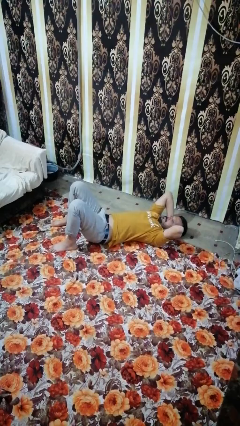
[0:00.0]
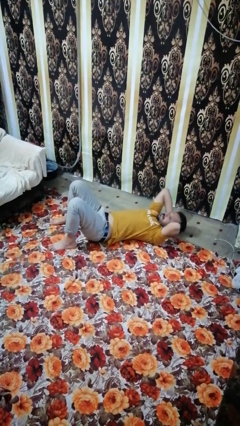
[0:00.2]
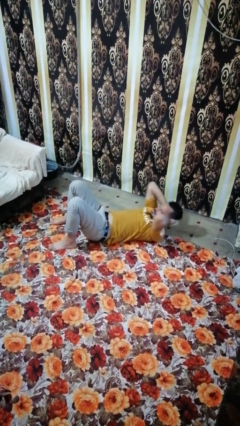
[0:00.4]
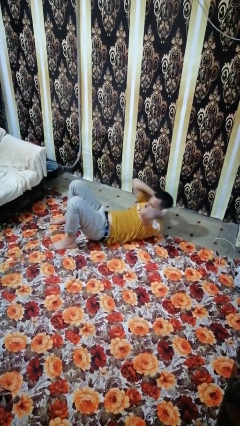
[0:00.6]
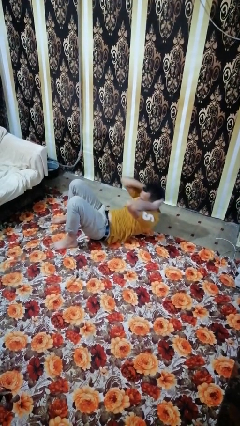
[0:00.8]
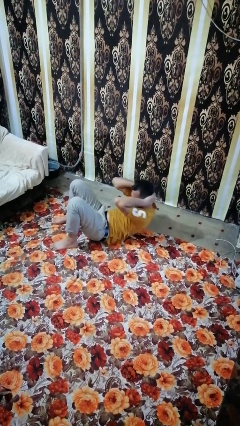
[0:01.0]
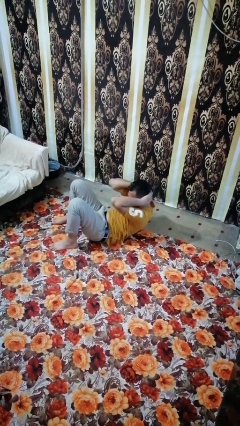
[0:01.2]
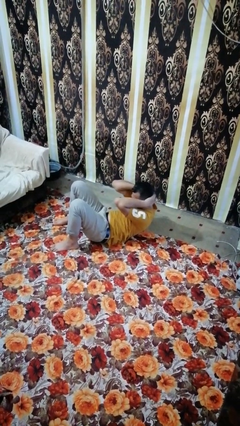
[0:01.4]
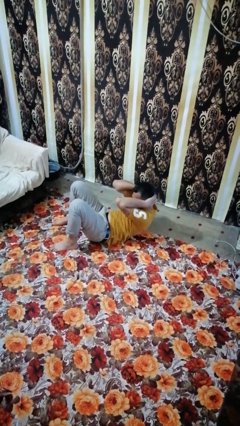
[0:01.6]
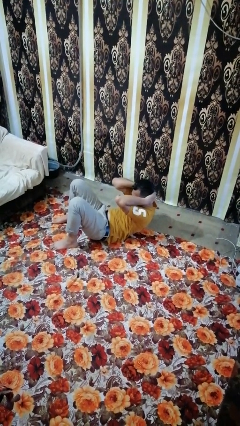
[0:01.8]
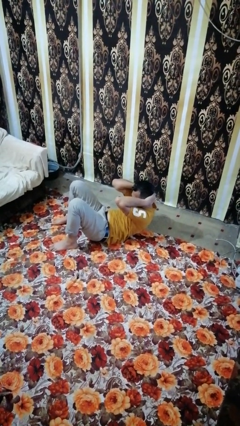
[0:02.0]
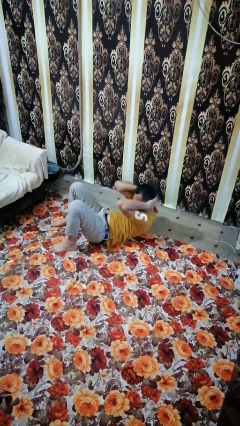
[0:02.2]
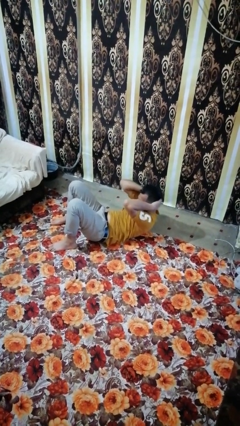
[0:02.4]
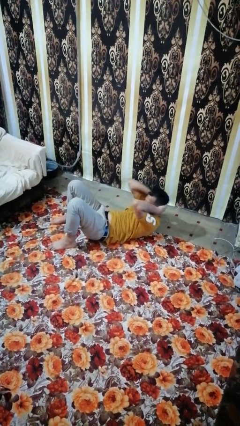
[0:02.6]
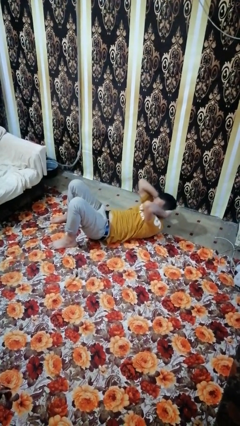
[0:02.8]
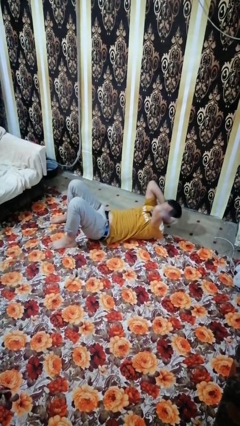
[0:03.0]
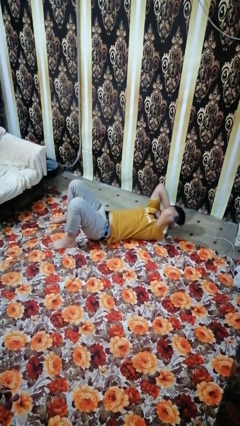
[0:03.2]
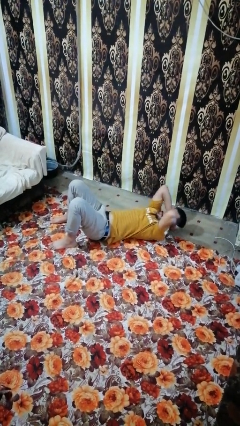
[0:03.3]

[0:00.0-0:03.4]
person exercises with situp

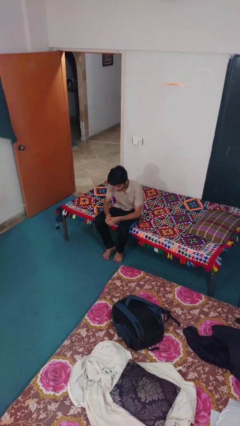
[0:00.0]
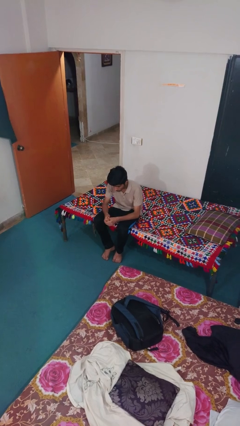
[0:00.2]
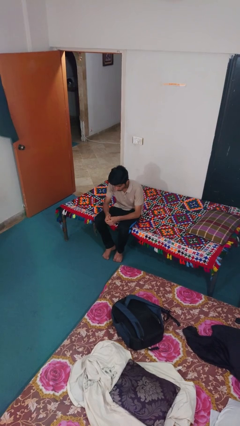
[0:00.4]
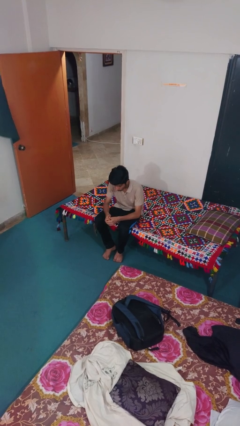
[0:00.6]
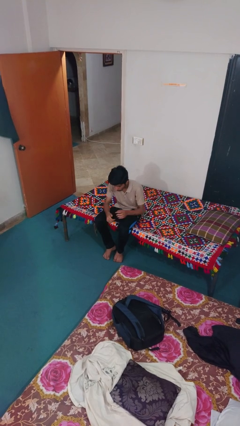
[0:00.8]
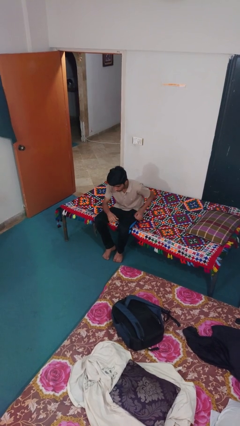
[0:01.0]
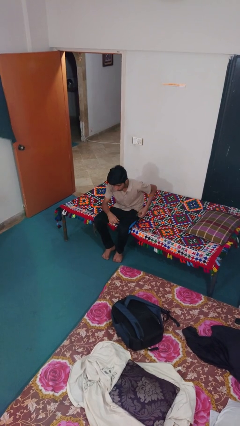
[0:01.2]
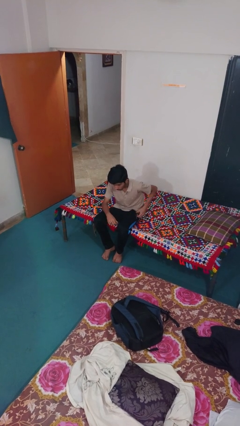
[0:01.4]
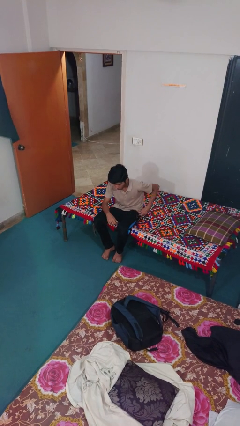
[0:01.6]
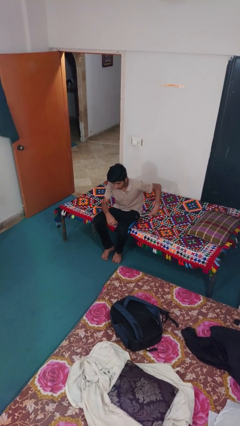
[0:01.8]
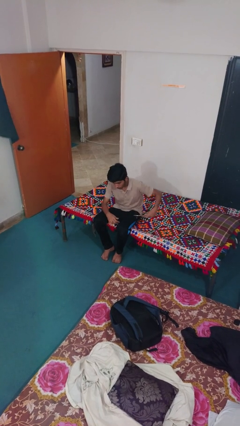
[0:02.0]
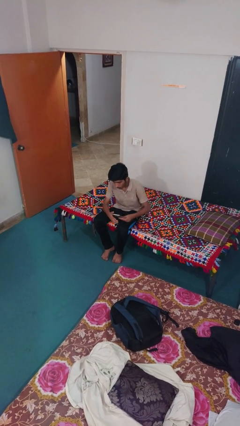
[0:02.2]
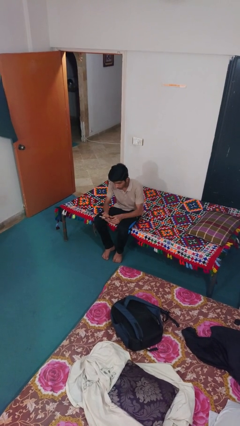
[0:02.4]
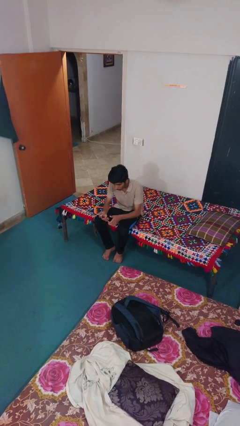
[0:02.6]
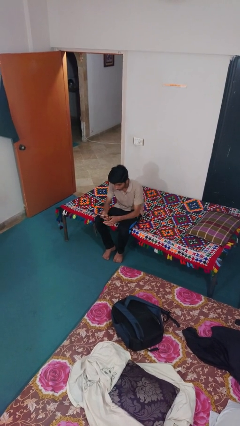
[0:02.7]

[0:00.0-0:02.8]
person takes phone from pocket

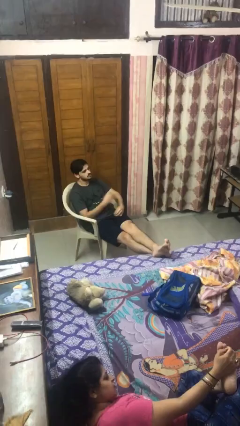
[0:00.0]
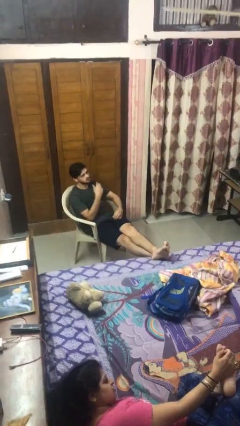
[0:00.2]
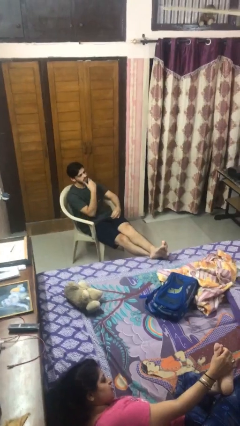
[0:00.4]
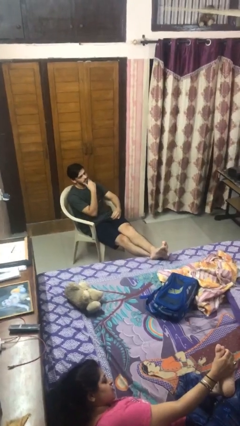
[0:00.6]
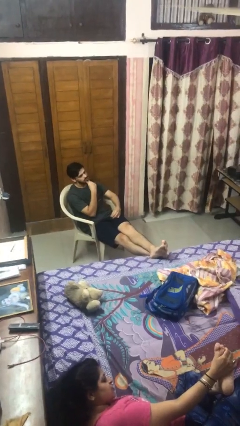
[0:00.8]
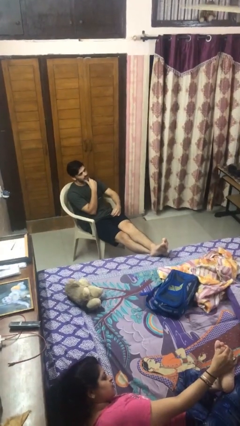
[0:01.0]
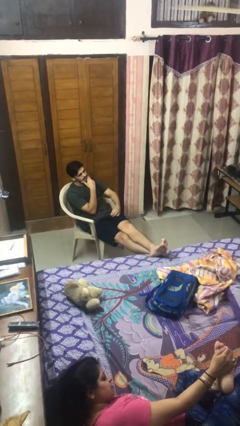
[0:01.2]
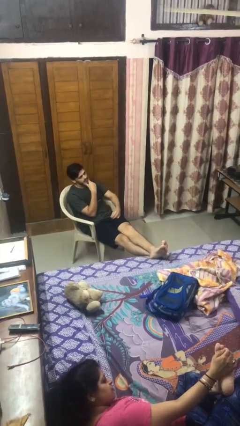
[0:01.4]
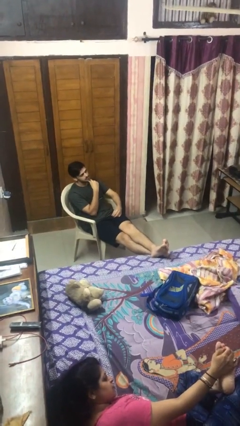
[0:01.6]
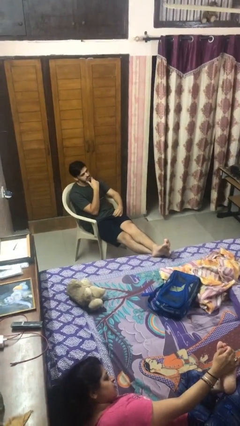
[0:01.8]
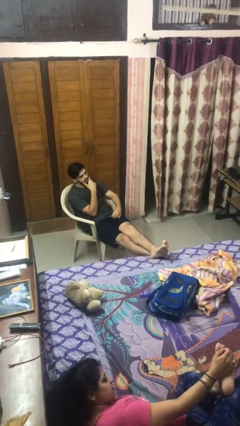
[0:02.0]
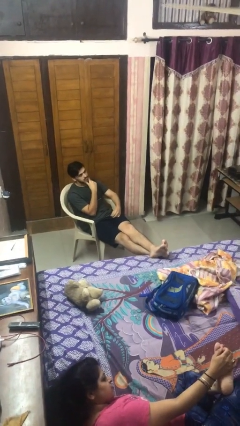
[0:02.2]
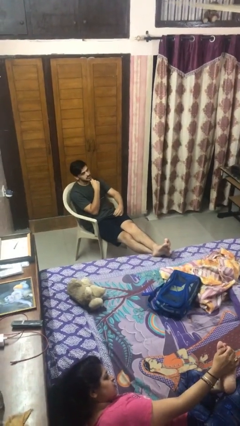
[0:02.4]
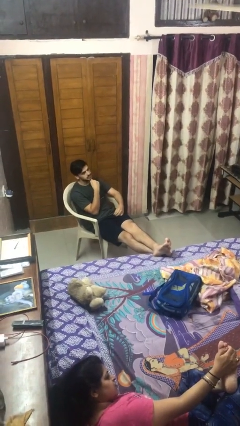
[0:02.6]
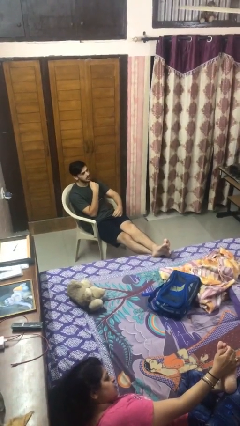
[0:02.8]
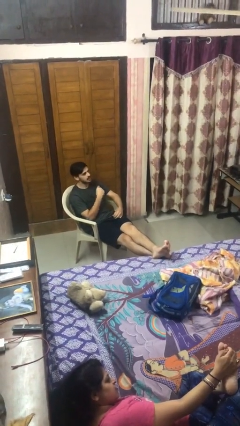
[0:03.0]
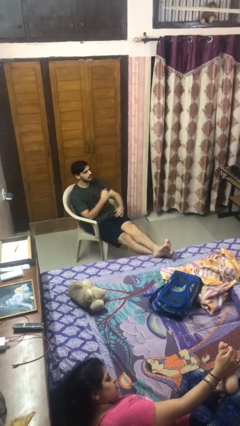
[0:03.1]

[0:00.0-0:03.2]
person strokes chin

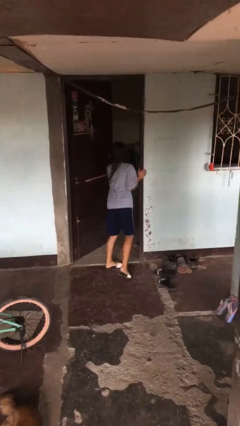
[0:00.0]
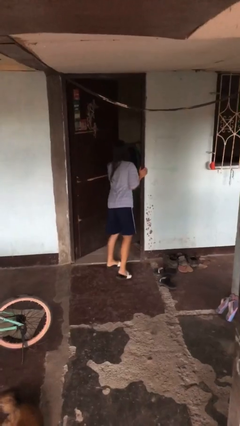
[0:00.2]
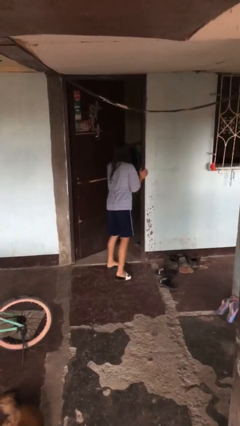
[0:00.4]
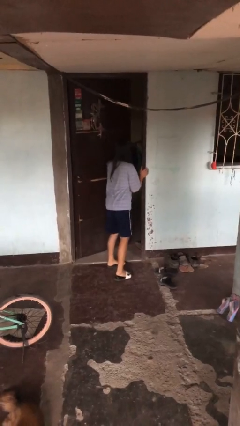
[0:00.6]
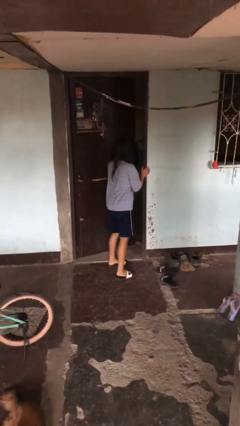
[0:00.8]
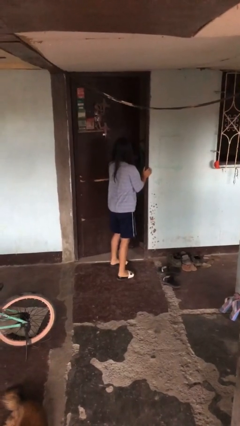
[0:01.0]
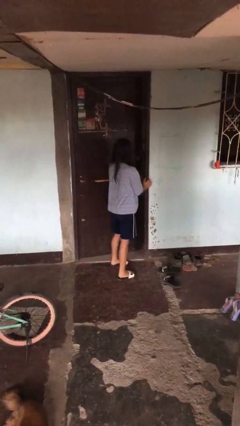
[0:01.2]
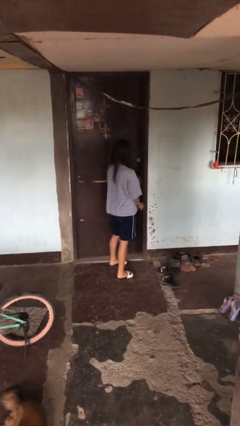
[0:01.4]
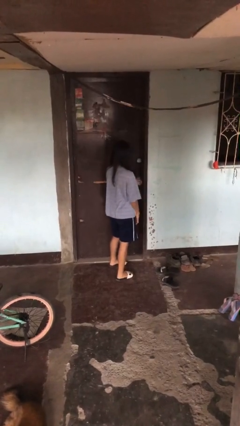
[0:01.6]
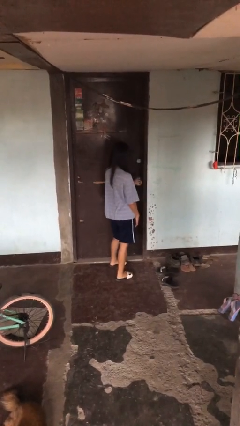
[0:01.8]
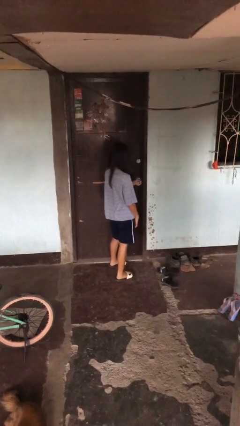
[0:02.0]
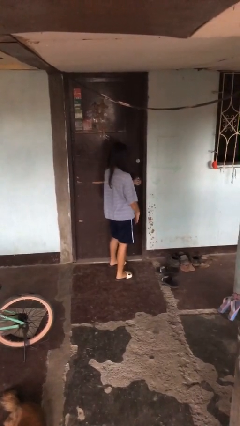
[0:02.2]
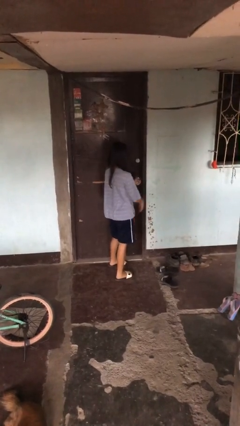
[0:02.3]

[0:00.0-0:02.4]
person closes facility door

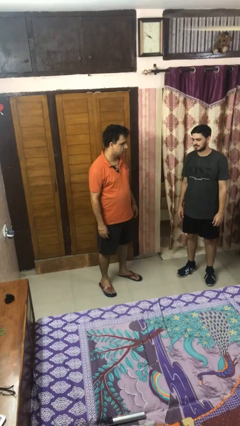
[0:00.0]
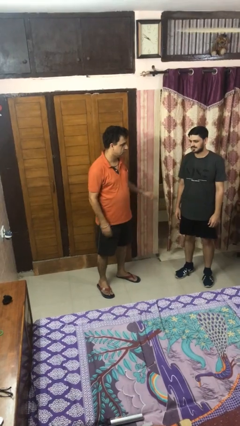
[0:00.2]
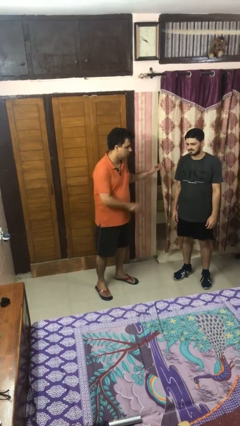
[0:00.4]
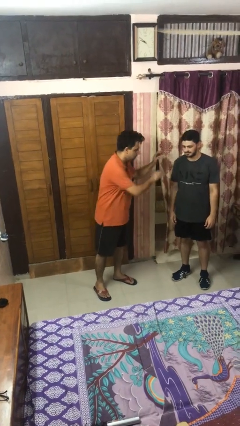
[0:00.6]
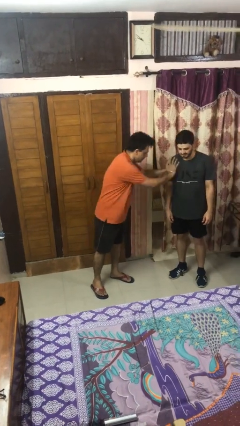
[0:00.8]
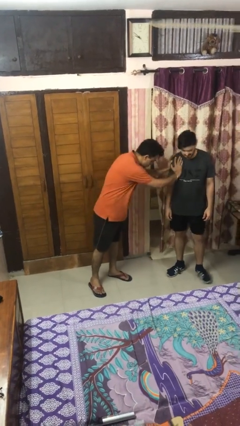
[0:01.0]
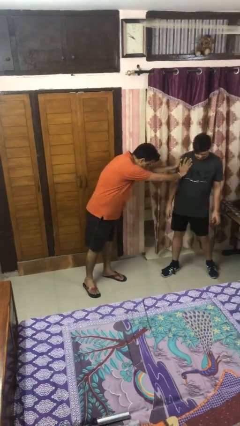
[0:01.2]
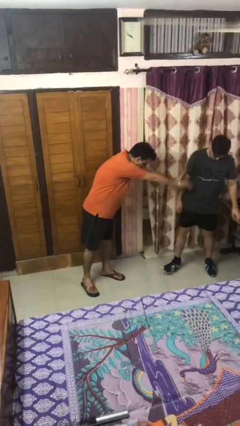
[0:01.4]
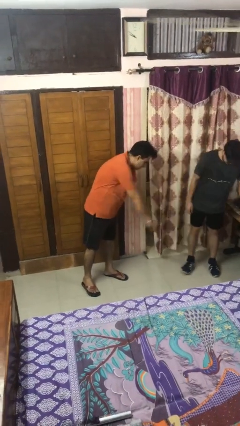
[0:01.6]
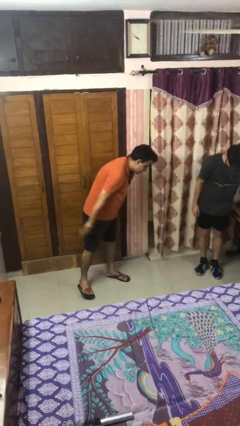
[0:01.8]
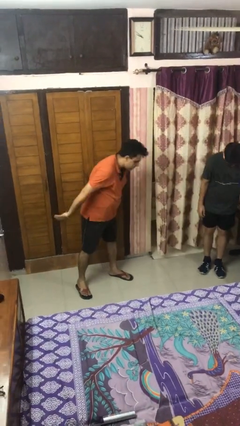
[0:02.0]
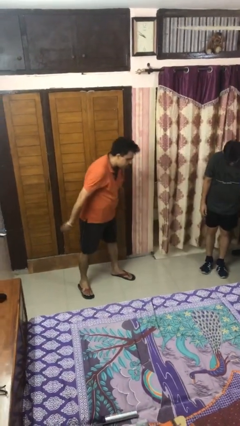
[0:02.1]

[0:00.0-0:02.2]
person shoves person

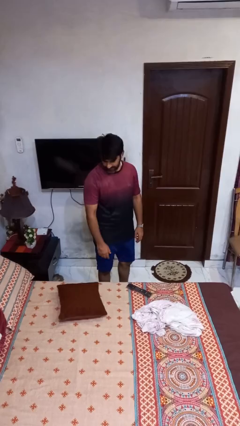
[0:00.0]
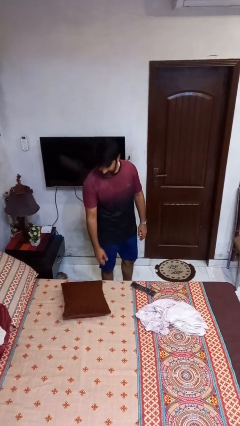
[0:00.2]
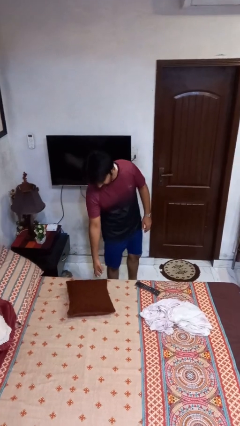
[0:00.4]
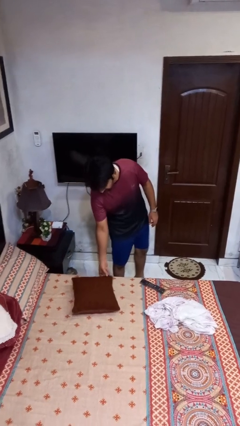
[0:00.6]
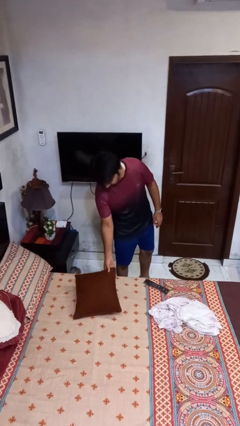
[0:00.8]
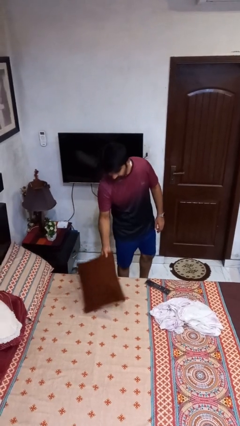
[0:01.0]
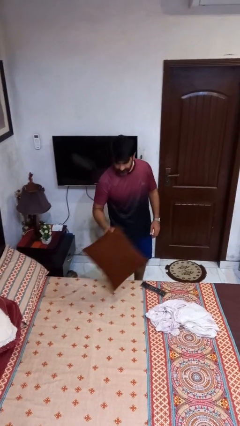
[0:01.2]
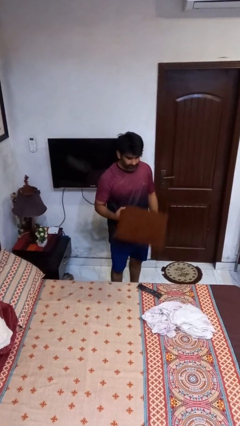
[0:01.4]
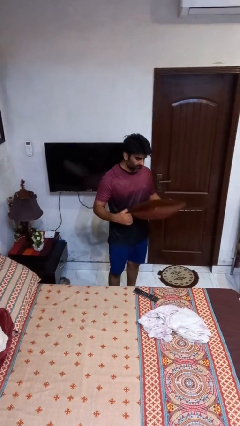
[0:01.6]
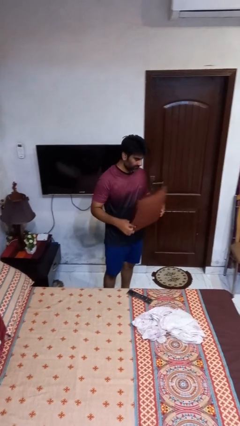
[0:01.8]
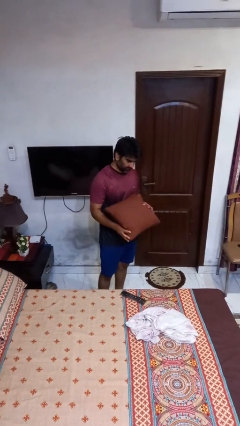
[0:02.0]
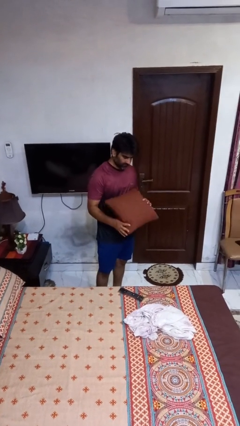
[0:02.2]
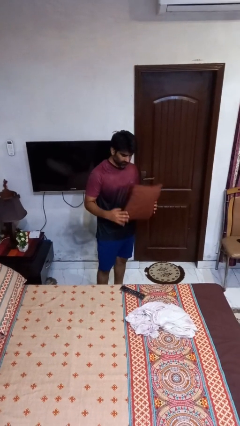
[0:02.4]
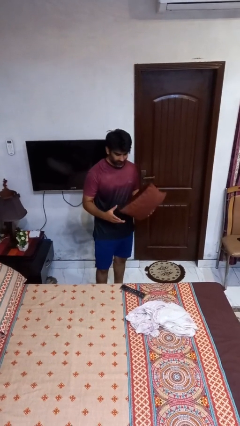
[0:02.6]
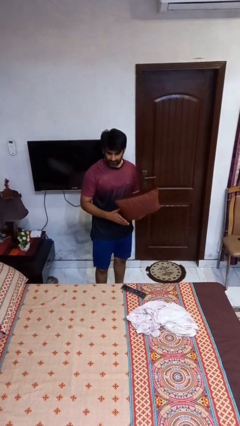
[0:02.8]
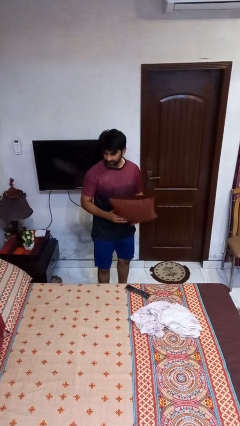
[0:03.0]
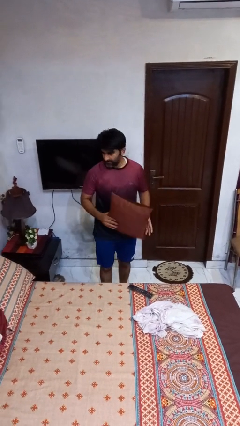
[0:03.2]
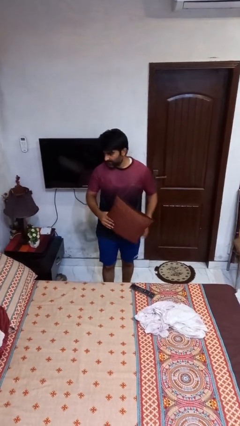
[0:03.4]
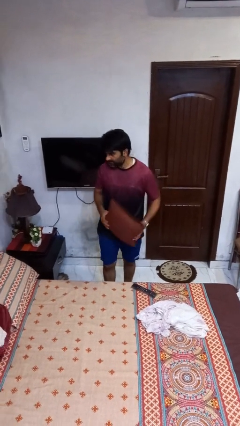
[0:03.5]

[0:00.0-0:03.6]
person picks up object from bed

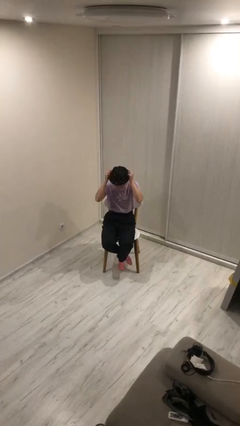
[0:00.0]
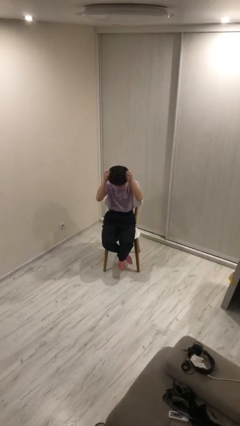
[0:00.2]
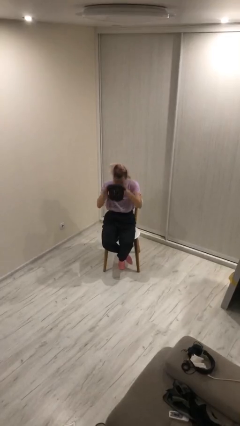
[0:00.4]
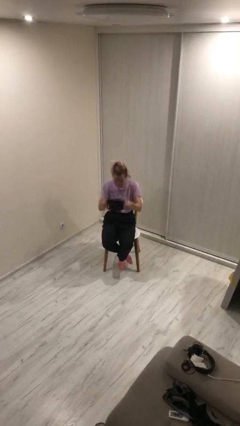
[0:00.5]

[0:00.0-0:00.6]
person takes off hat
